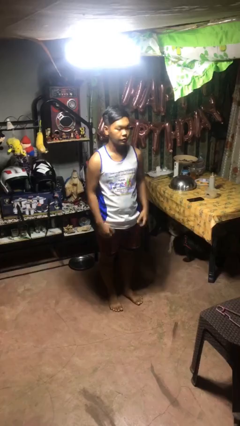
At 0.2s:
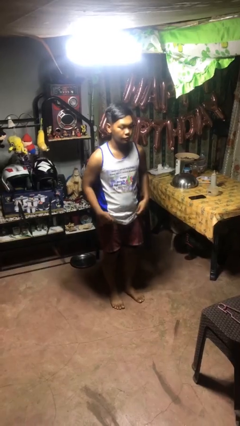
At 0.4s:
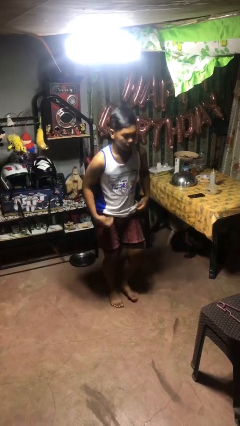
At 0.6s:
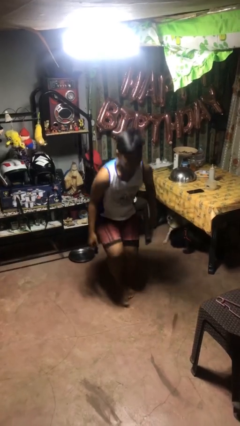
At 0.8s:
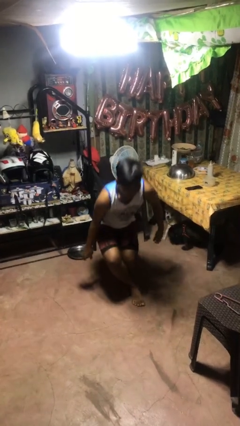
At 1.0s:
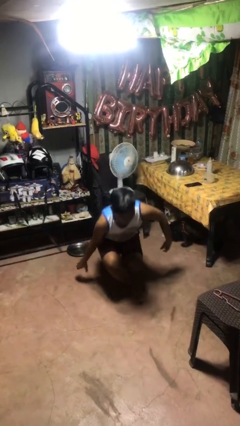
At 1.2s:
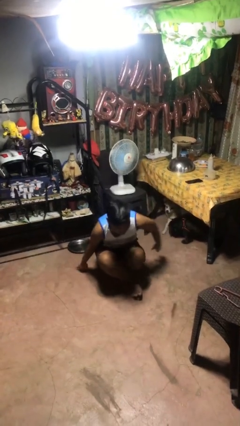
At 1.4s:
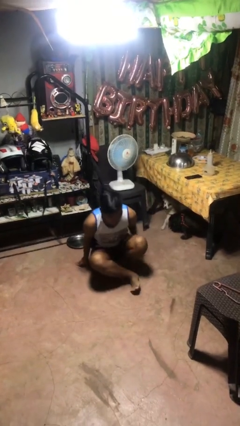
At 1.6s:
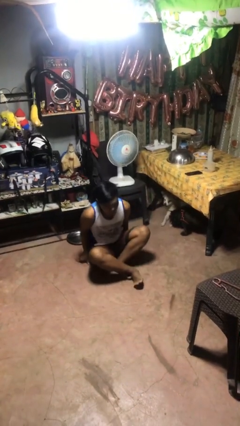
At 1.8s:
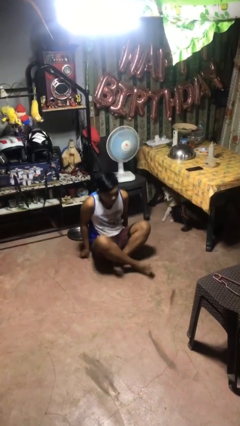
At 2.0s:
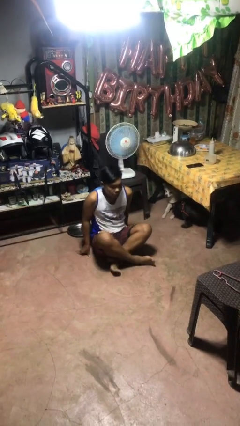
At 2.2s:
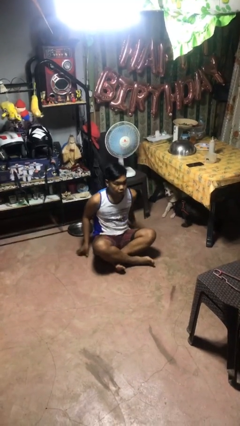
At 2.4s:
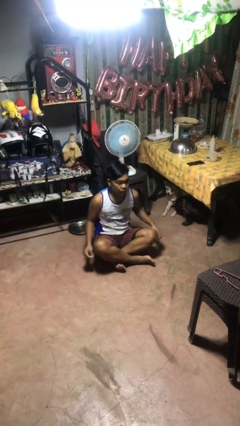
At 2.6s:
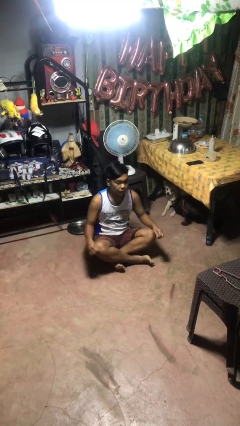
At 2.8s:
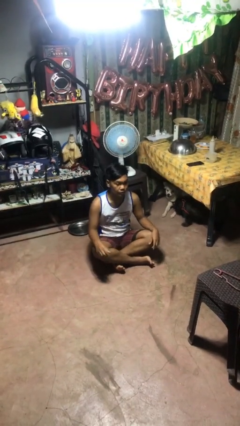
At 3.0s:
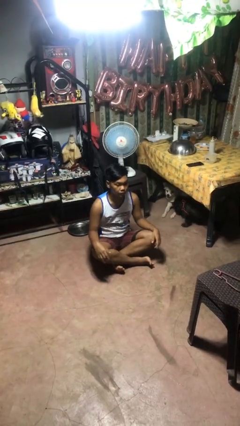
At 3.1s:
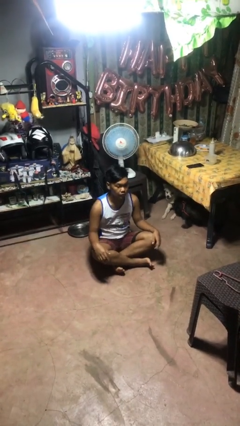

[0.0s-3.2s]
person sits crisscross

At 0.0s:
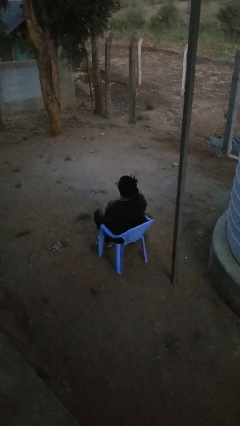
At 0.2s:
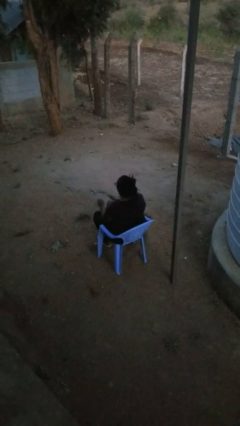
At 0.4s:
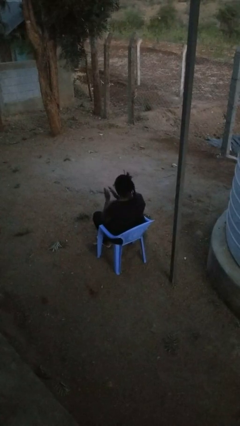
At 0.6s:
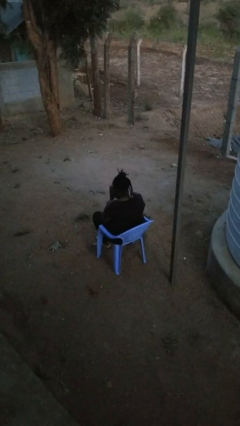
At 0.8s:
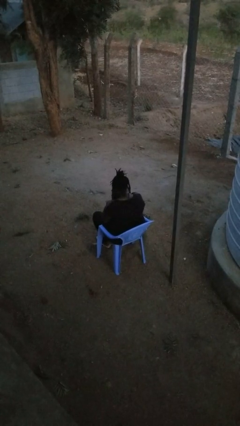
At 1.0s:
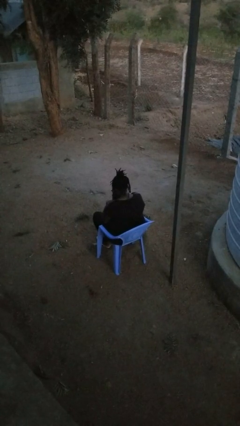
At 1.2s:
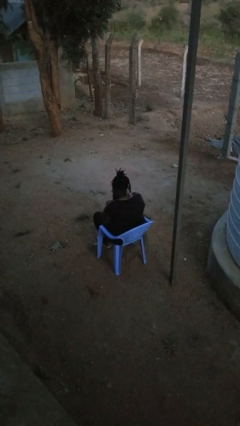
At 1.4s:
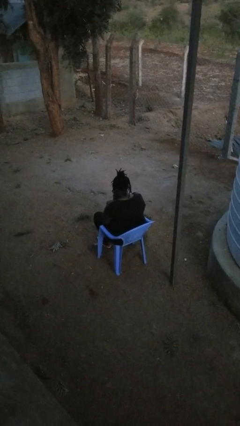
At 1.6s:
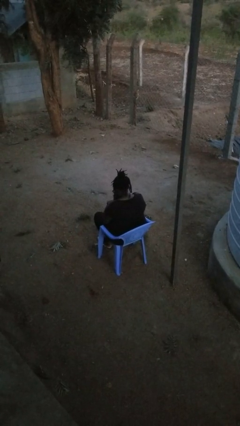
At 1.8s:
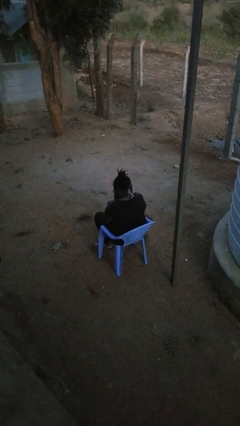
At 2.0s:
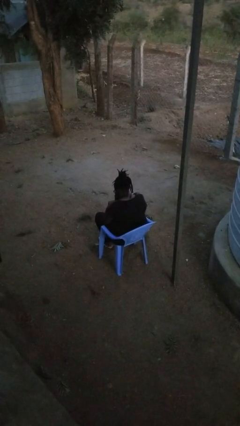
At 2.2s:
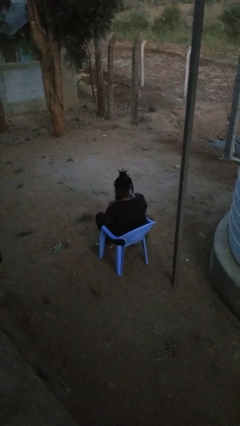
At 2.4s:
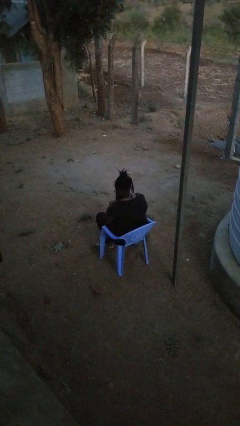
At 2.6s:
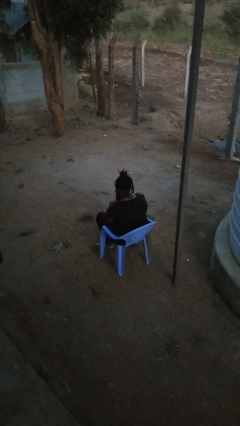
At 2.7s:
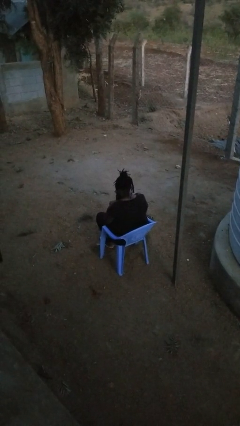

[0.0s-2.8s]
person prays

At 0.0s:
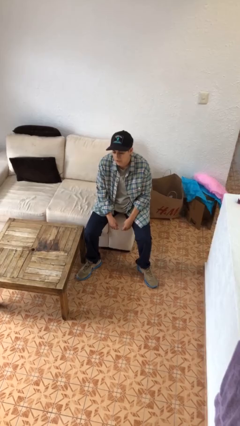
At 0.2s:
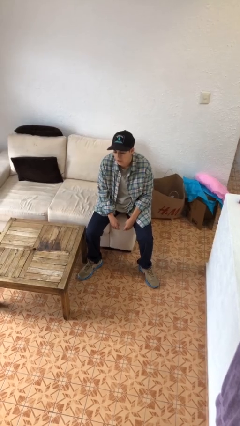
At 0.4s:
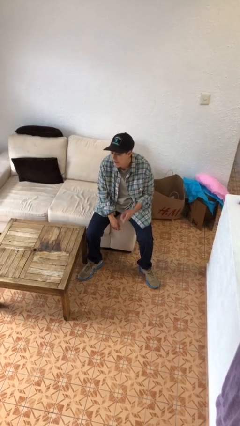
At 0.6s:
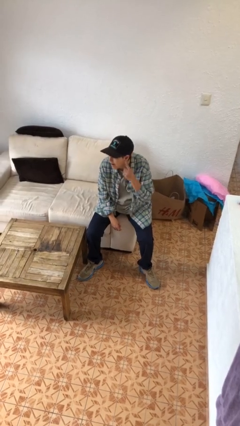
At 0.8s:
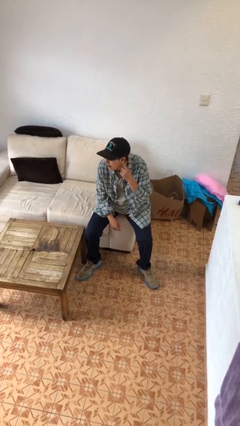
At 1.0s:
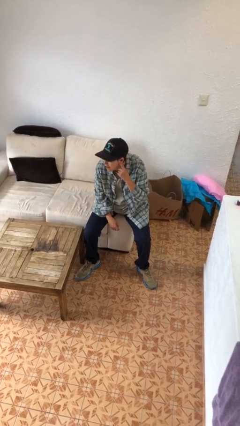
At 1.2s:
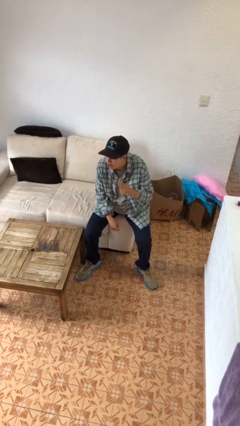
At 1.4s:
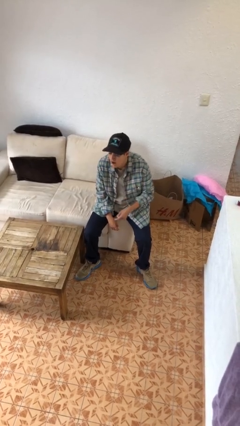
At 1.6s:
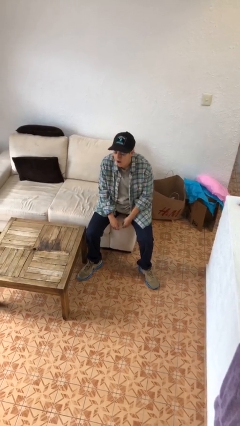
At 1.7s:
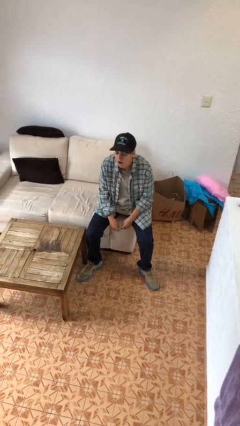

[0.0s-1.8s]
person gestures listen closely

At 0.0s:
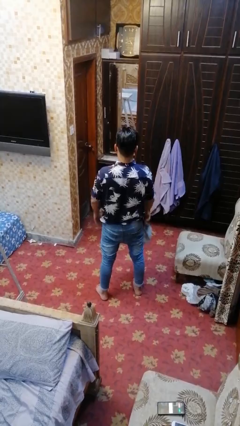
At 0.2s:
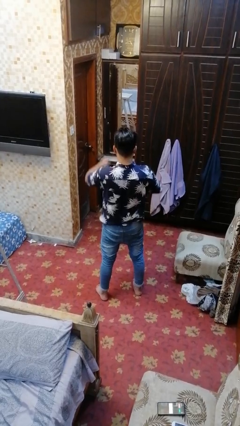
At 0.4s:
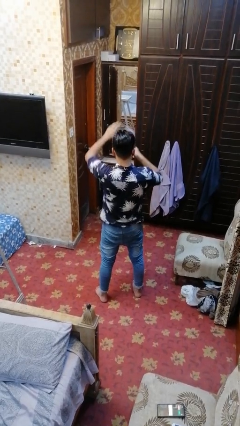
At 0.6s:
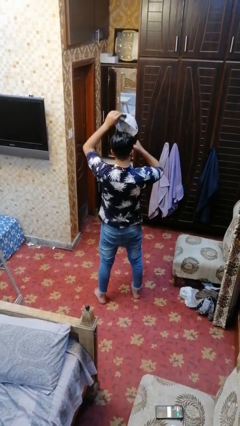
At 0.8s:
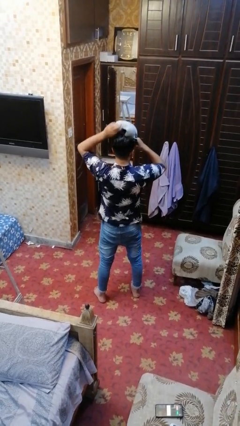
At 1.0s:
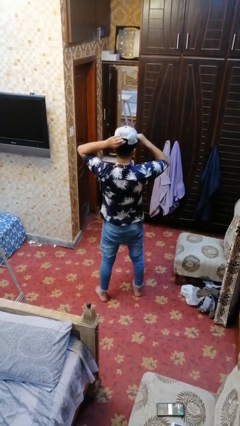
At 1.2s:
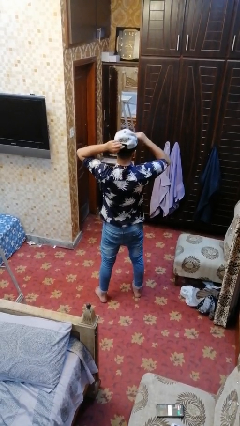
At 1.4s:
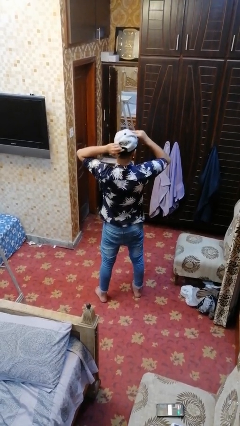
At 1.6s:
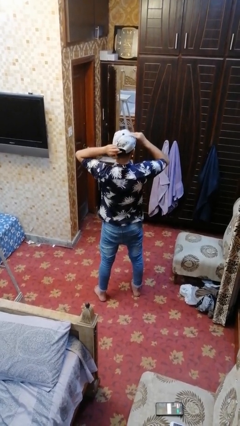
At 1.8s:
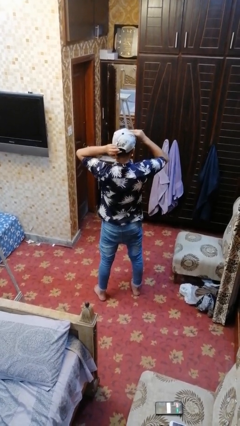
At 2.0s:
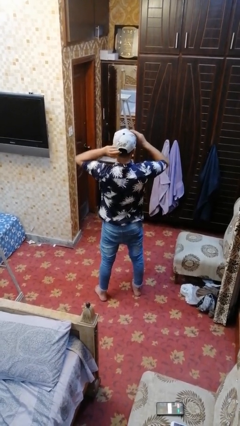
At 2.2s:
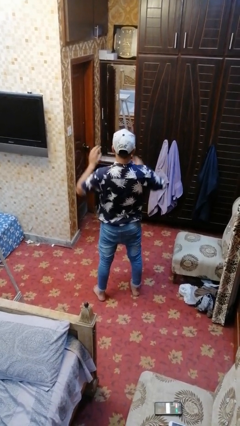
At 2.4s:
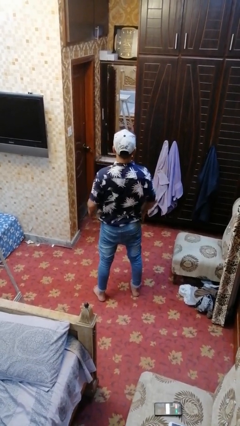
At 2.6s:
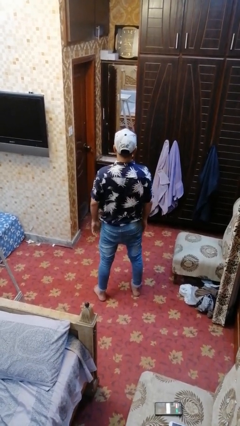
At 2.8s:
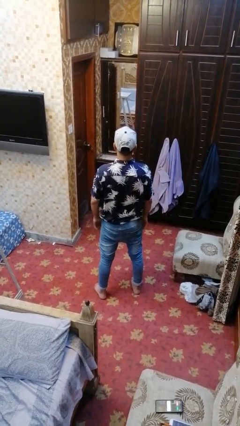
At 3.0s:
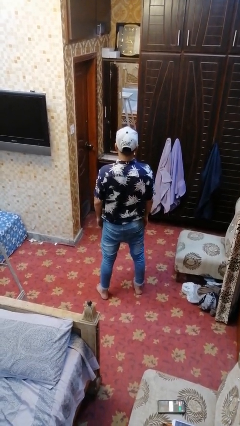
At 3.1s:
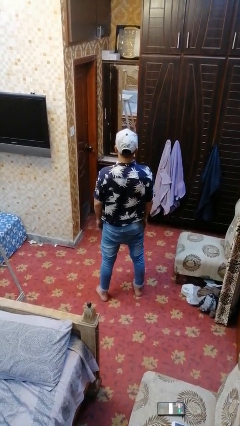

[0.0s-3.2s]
person puts on hat

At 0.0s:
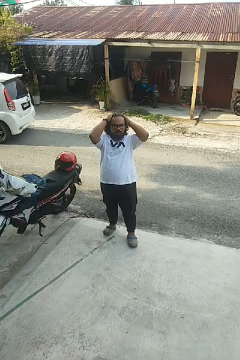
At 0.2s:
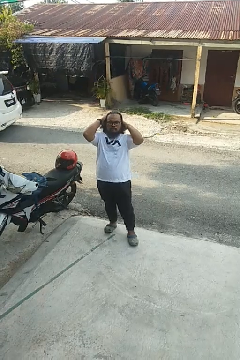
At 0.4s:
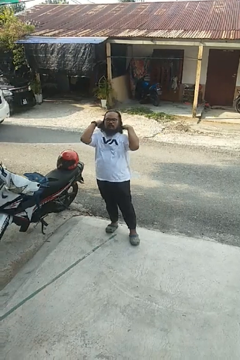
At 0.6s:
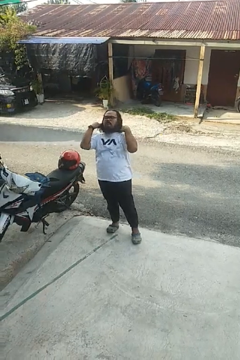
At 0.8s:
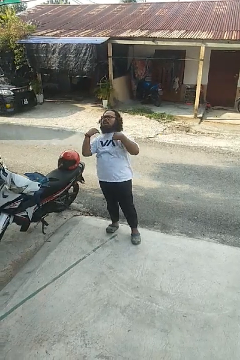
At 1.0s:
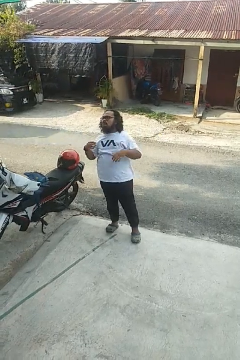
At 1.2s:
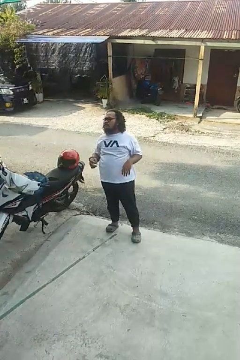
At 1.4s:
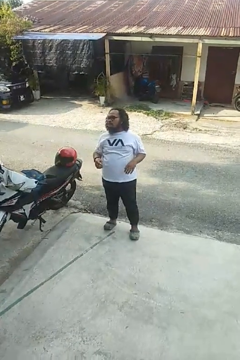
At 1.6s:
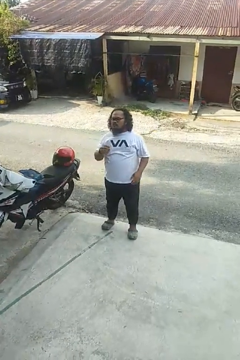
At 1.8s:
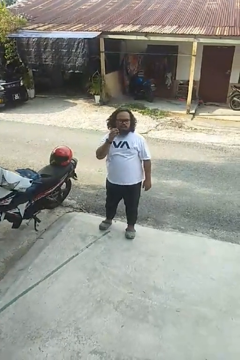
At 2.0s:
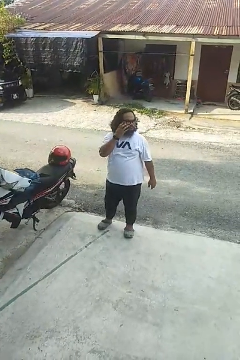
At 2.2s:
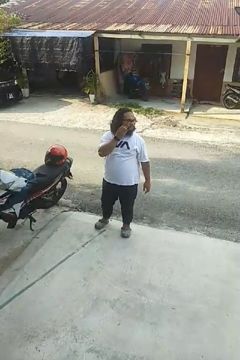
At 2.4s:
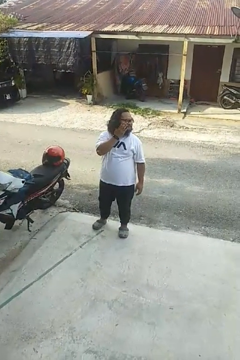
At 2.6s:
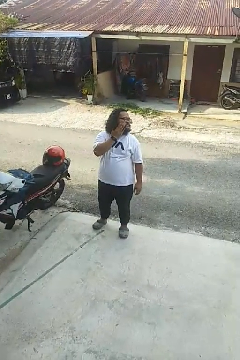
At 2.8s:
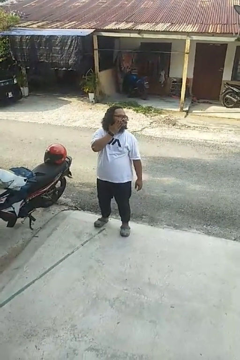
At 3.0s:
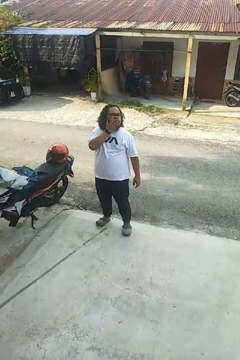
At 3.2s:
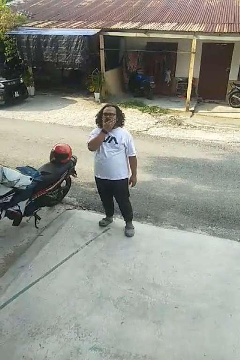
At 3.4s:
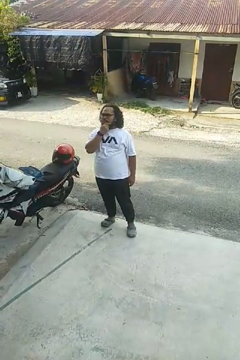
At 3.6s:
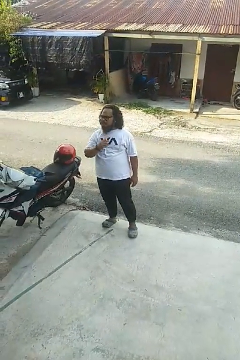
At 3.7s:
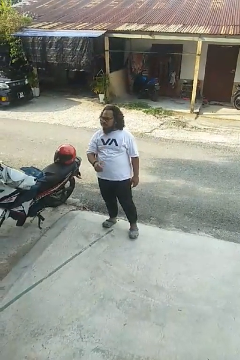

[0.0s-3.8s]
person scratches face

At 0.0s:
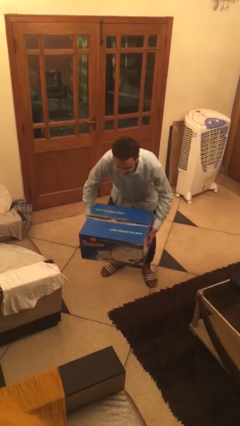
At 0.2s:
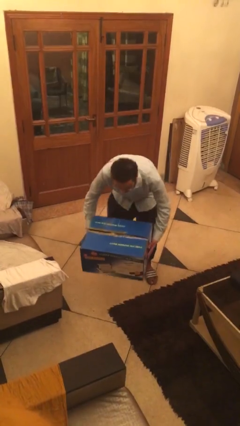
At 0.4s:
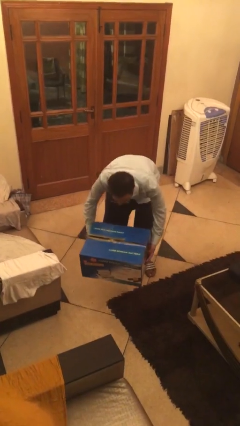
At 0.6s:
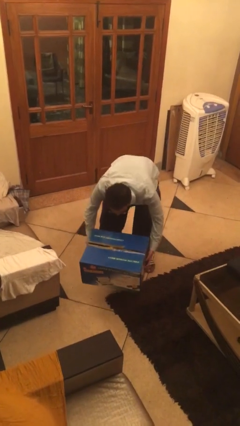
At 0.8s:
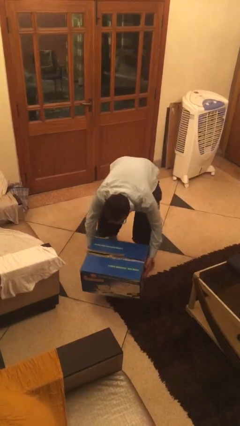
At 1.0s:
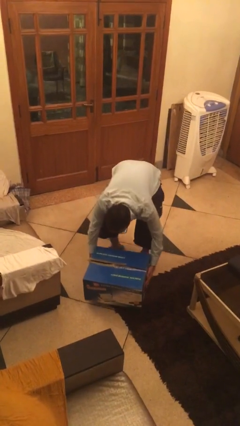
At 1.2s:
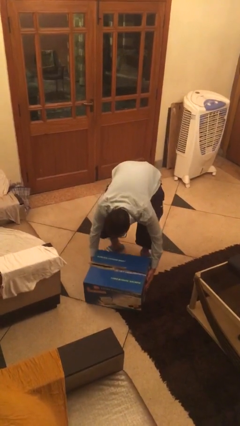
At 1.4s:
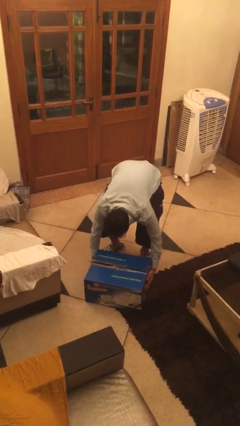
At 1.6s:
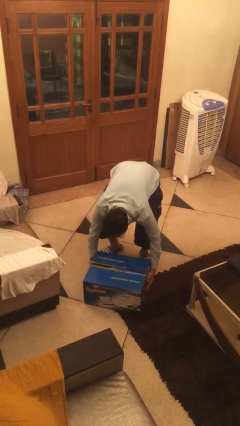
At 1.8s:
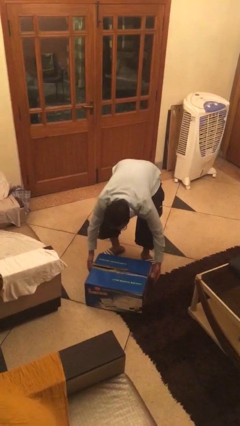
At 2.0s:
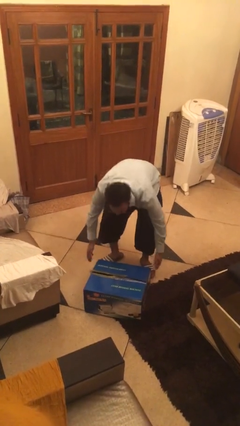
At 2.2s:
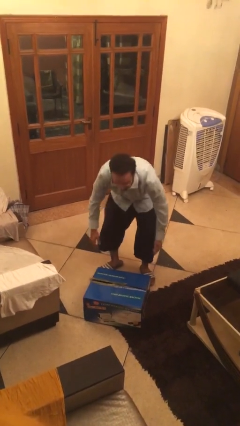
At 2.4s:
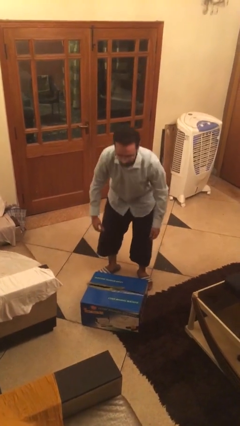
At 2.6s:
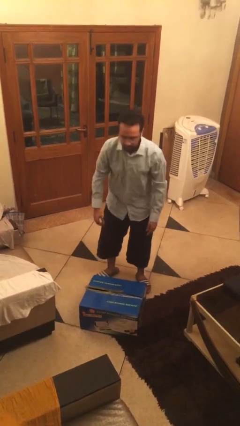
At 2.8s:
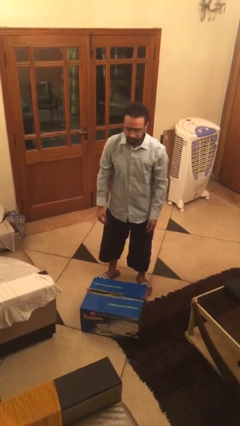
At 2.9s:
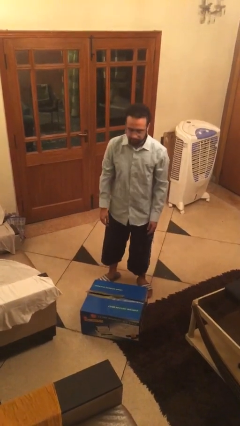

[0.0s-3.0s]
person puts down object on floor
